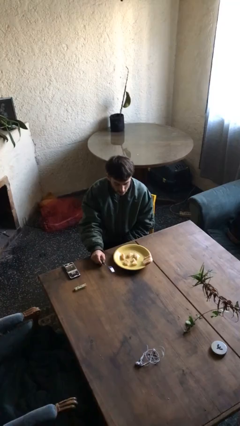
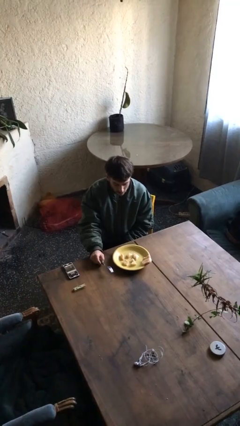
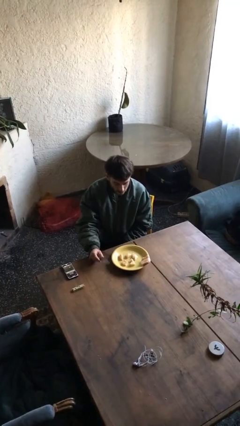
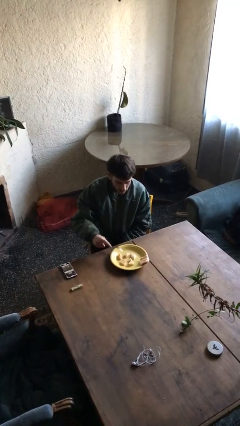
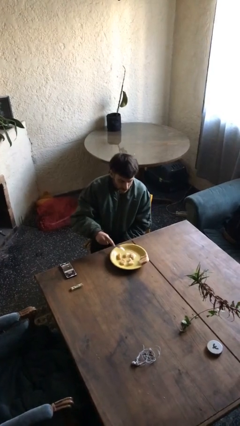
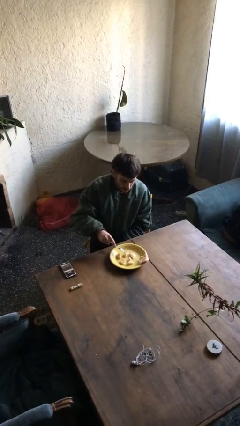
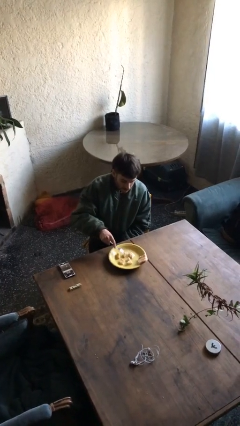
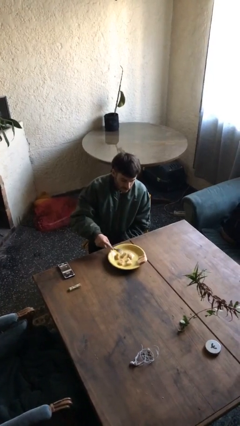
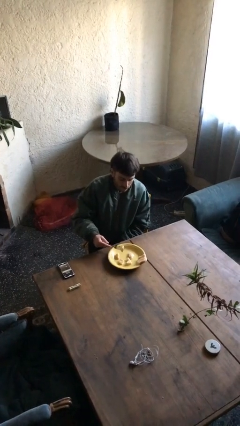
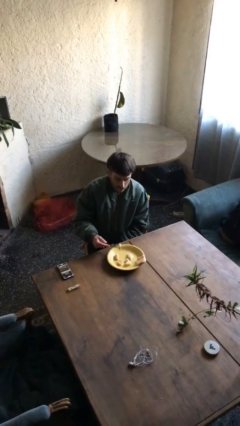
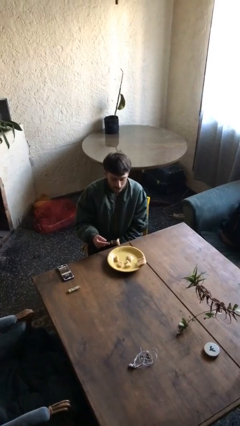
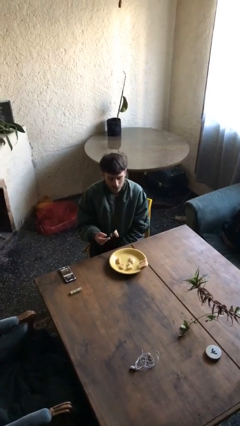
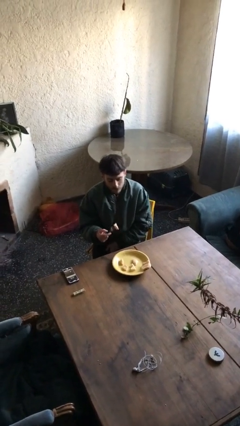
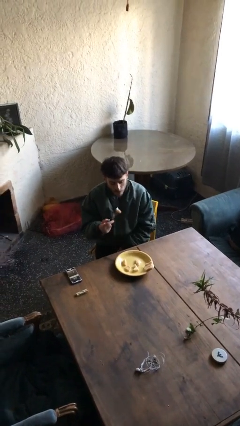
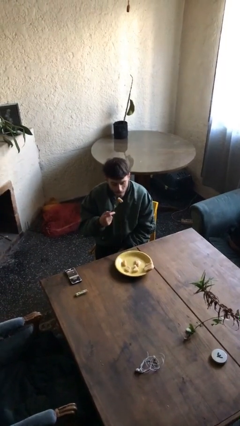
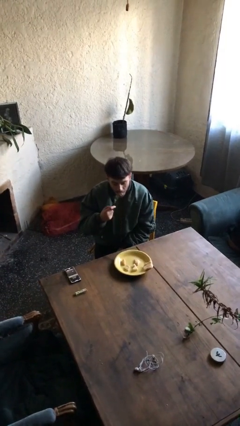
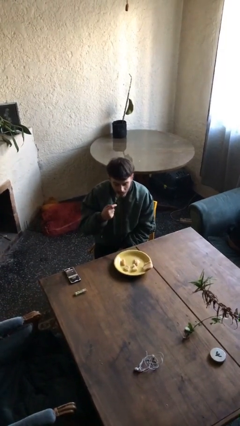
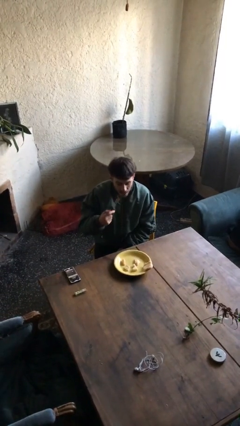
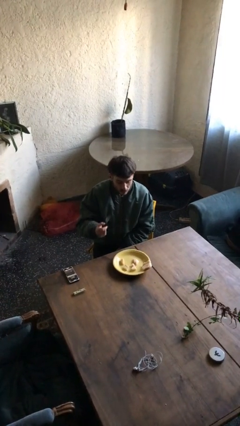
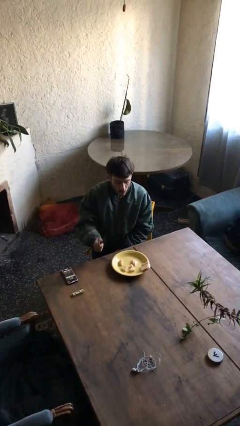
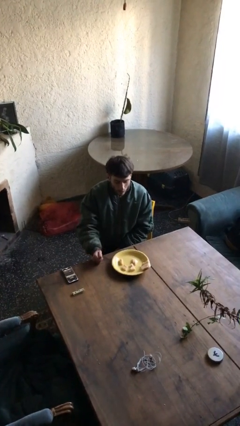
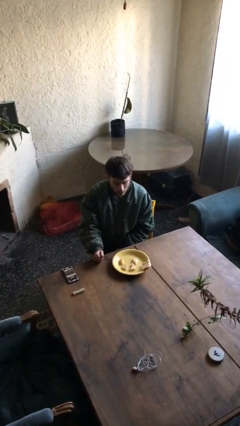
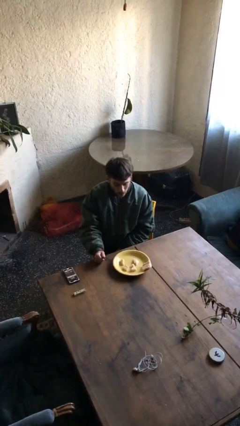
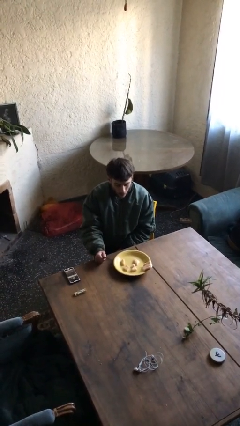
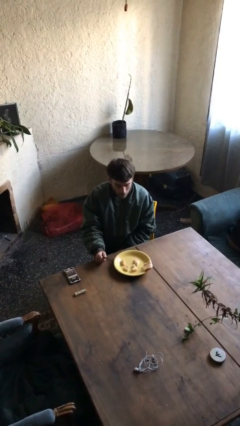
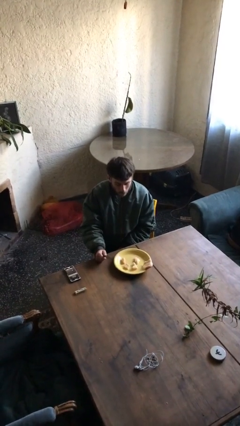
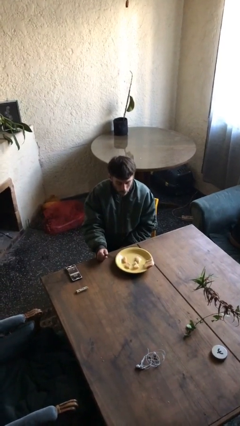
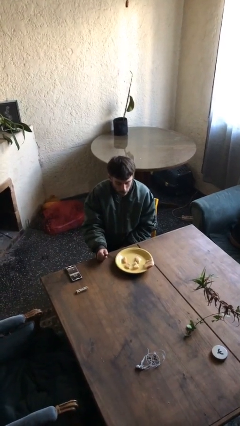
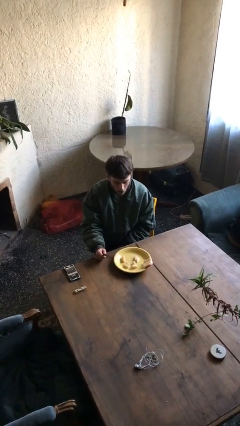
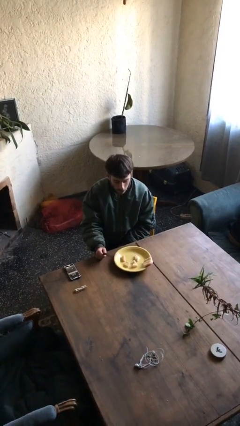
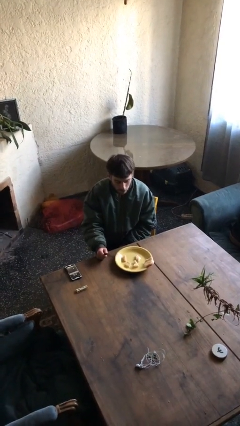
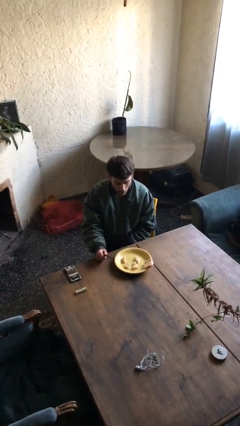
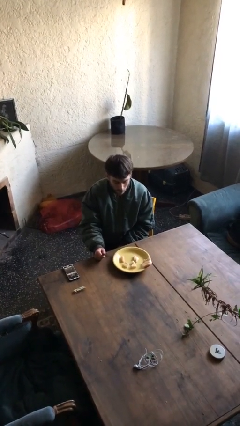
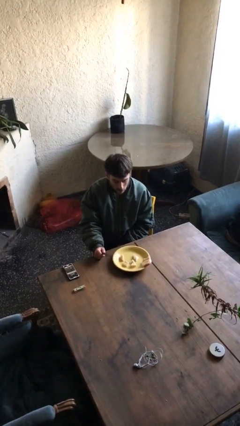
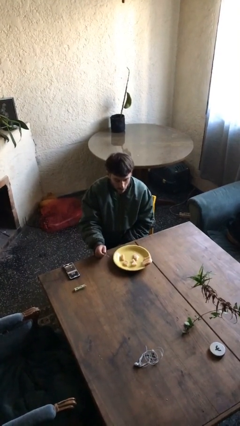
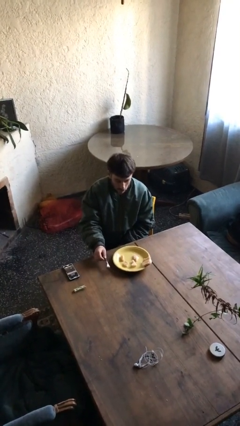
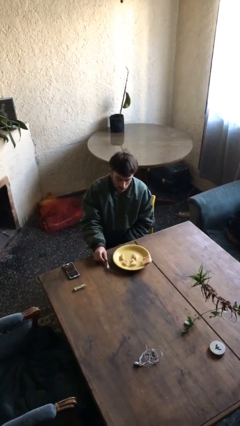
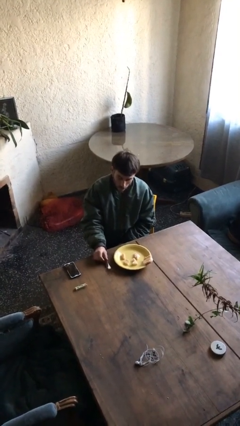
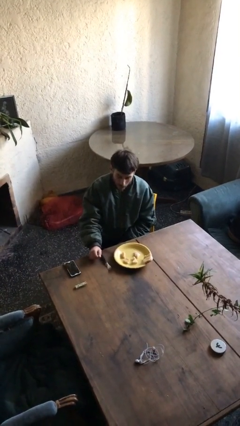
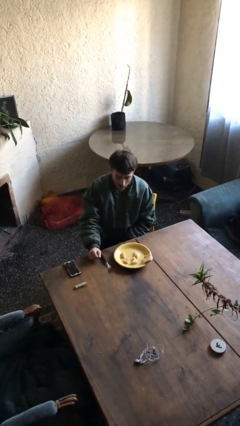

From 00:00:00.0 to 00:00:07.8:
person eats with utensil

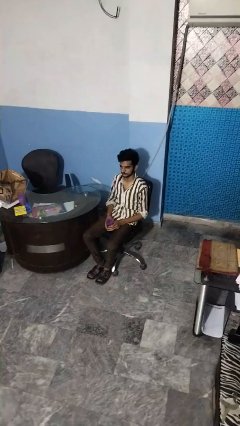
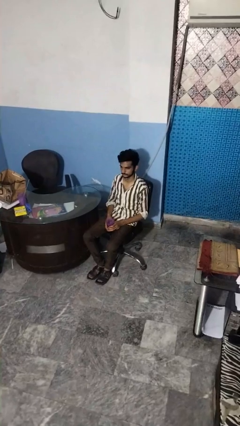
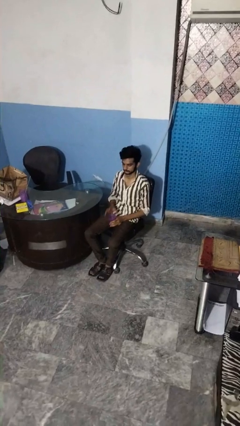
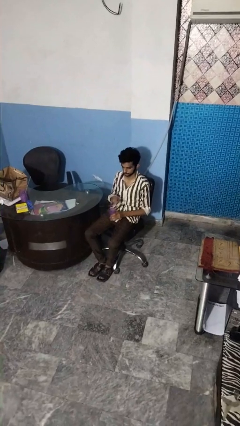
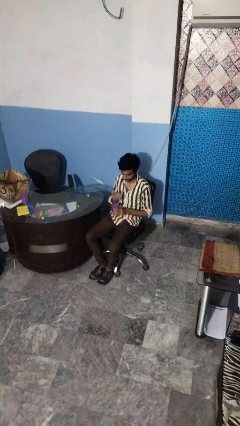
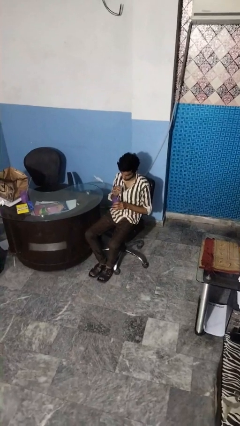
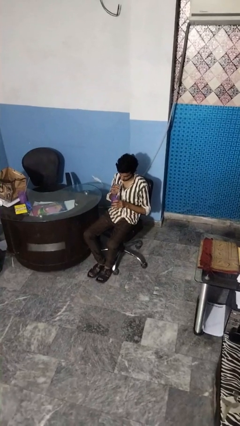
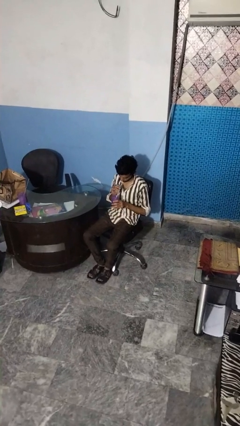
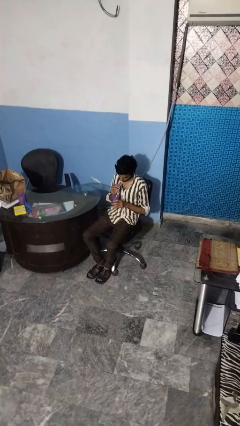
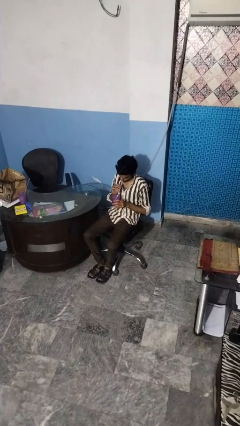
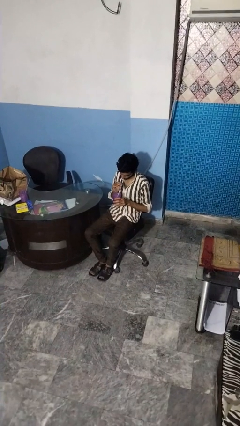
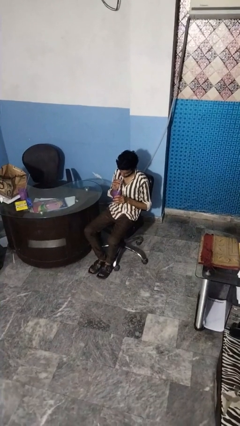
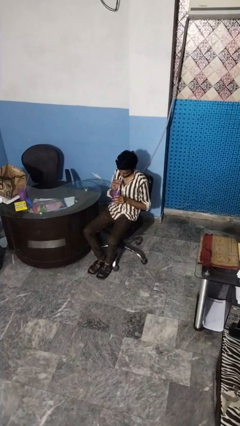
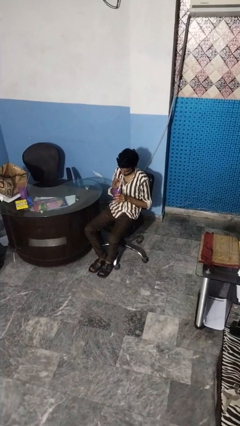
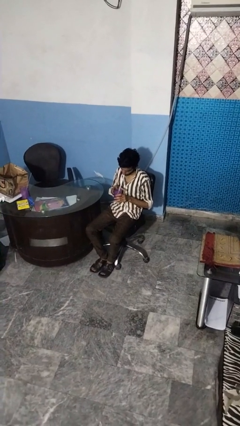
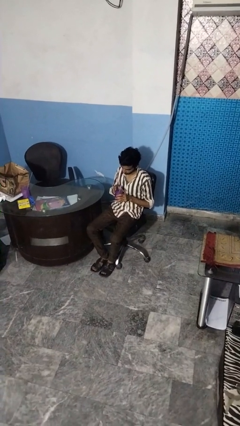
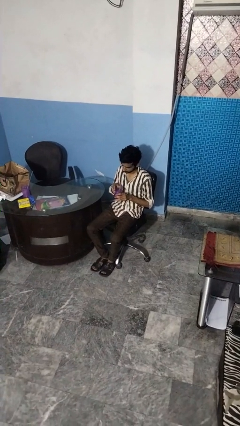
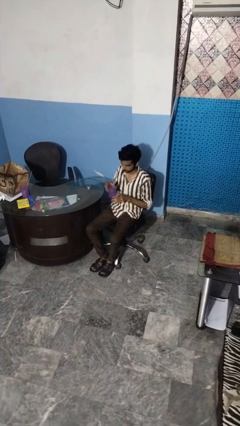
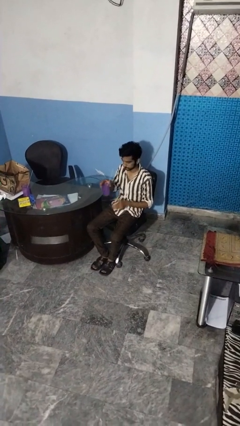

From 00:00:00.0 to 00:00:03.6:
person drinks from straw

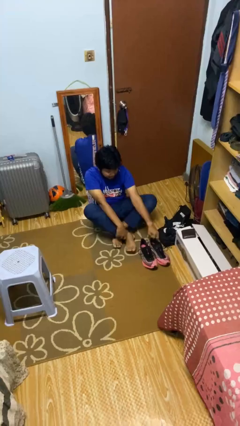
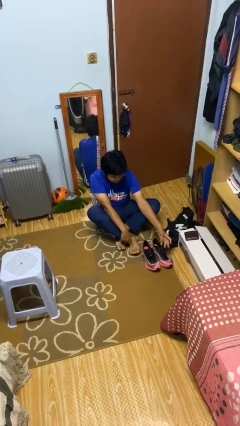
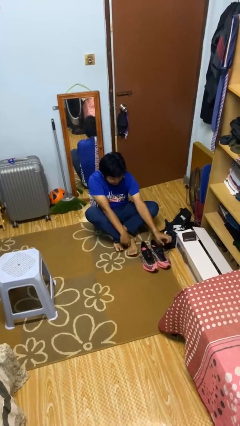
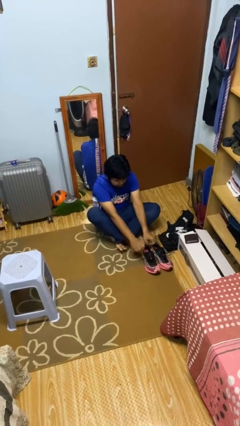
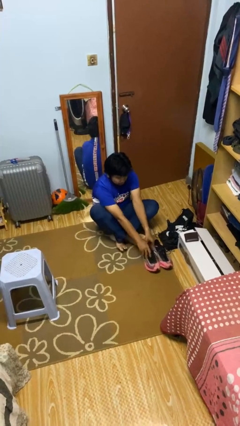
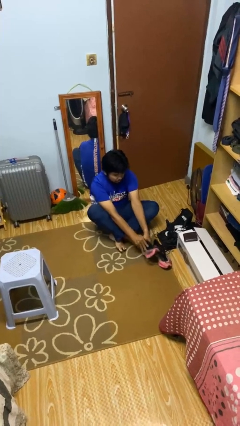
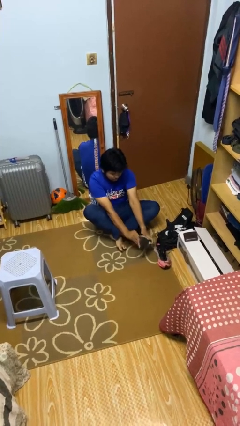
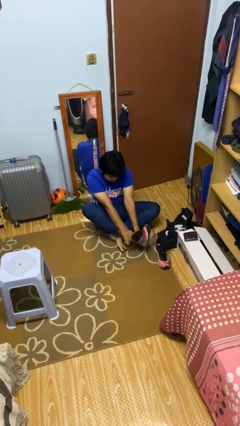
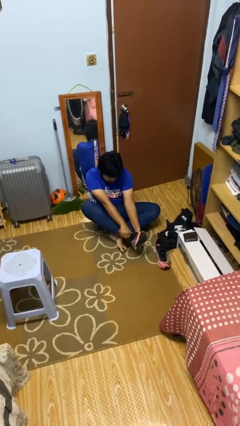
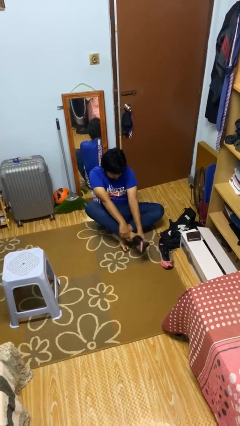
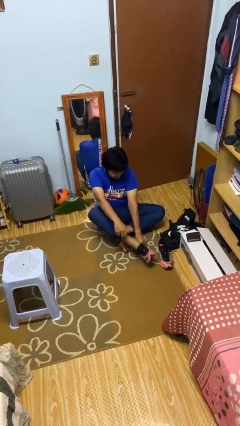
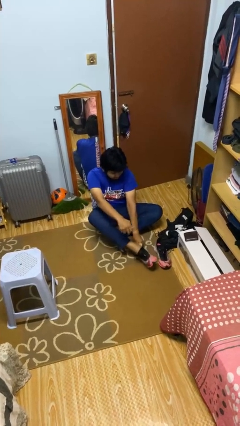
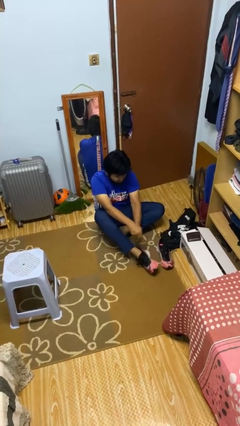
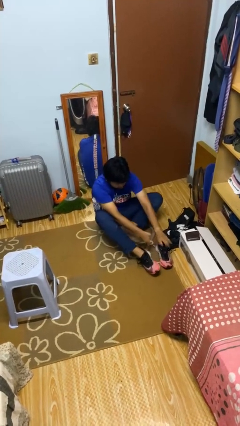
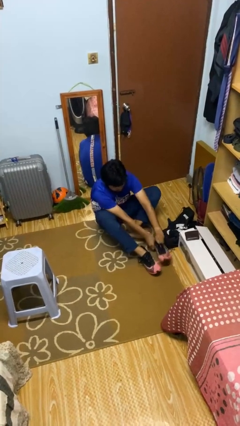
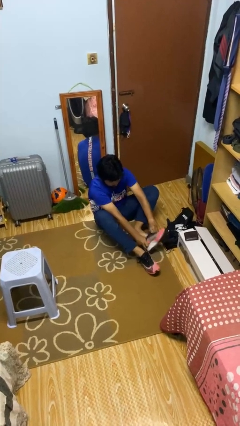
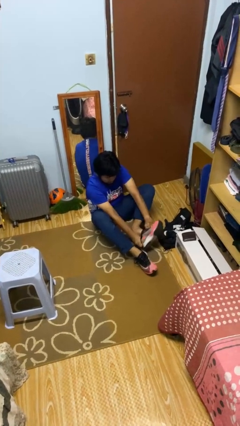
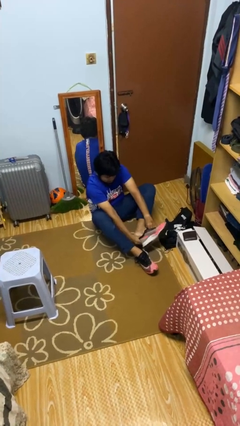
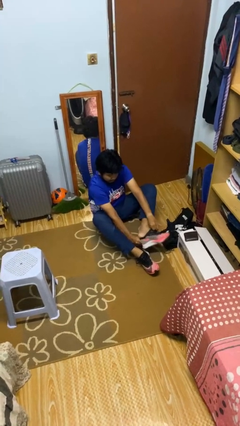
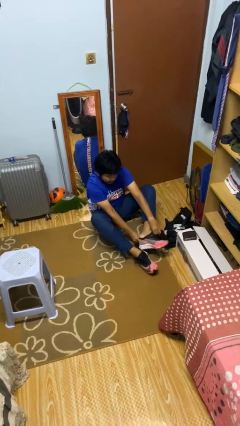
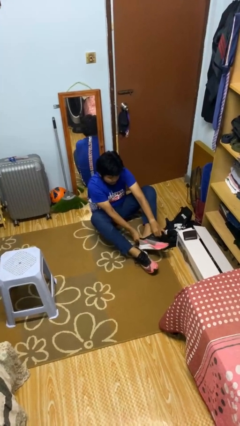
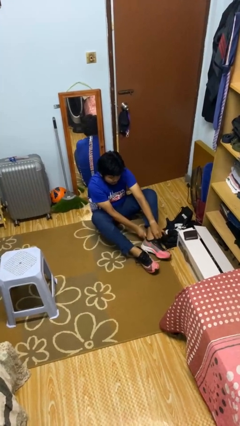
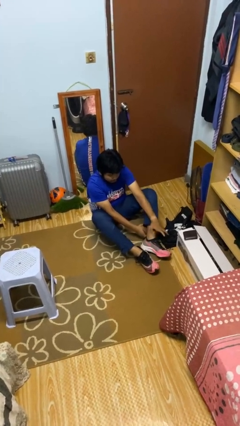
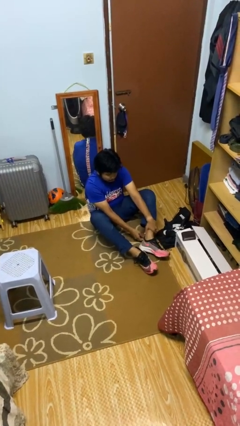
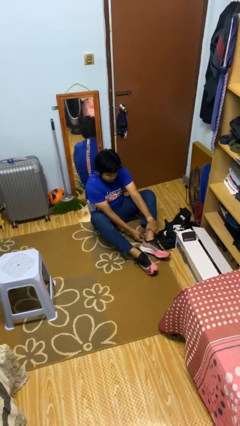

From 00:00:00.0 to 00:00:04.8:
person puts on shoes

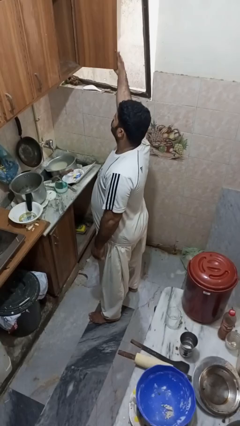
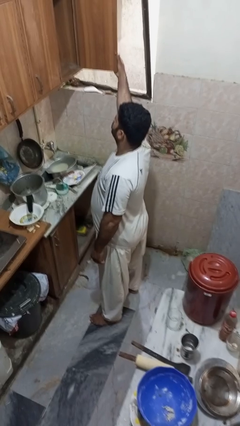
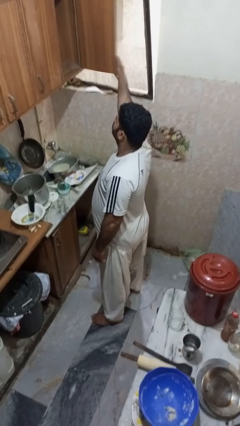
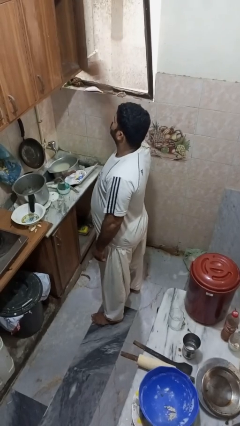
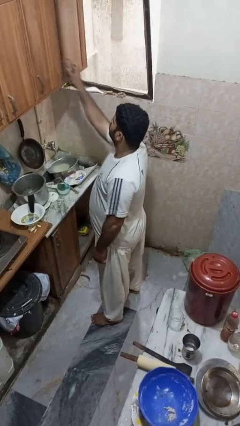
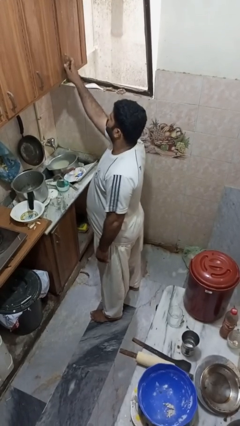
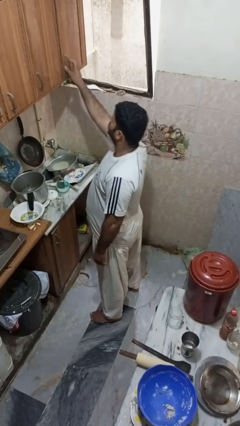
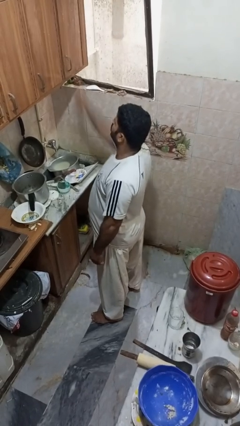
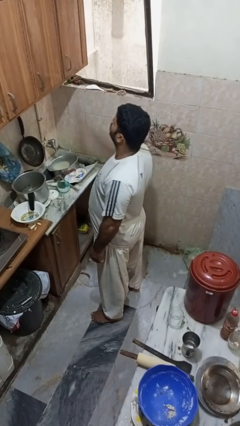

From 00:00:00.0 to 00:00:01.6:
person closes cabinet
